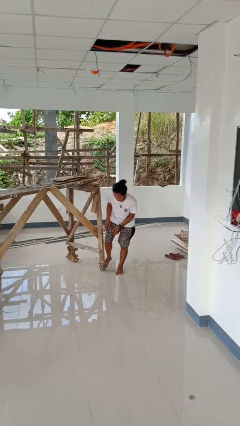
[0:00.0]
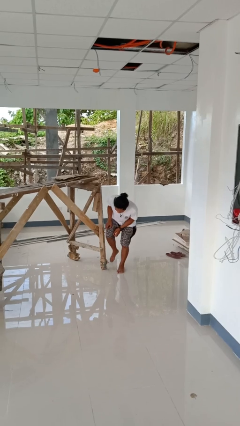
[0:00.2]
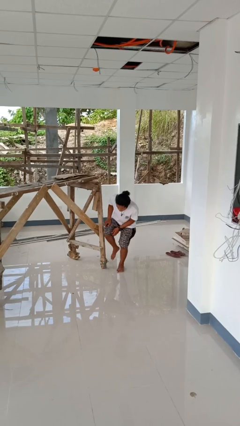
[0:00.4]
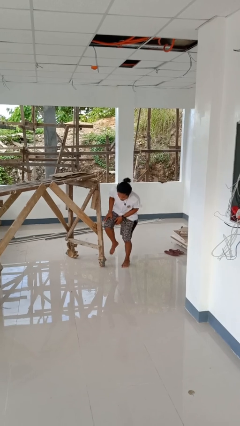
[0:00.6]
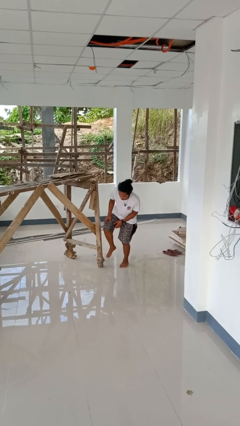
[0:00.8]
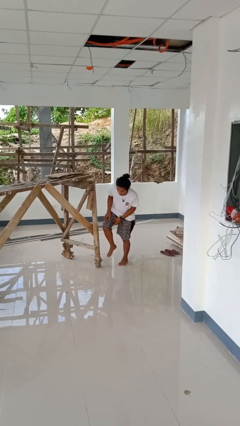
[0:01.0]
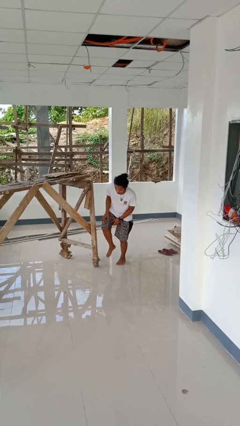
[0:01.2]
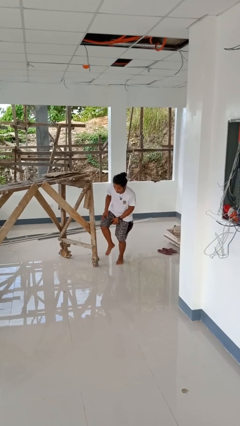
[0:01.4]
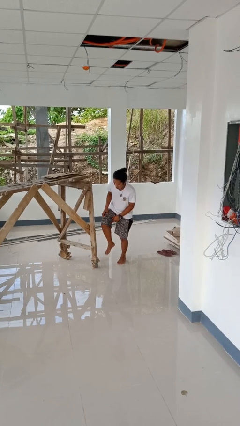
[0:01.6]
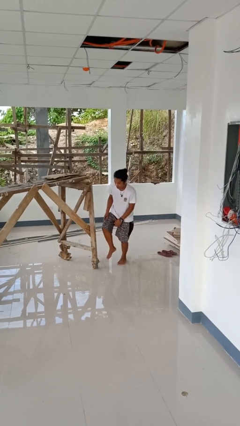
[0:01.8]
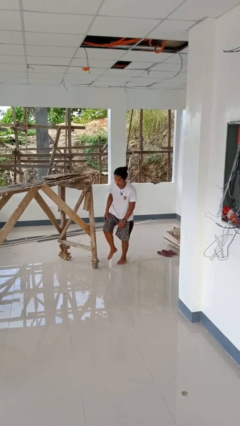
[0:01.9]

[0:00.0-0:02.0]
person stubs toe

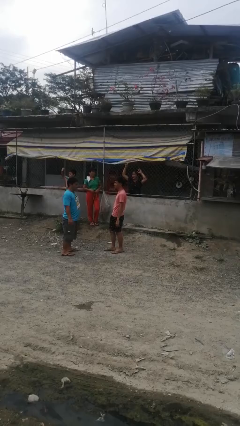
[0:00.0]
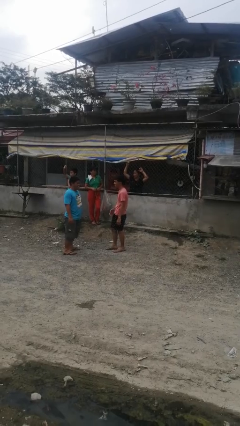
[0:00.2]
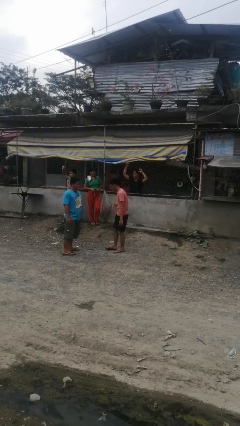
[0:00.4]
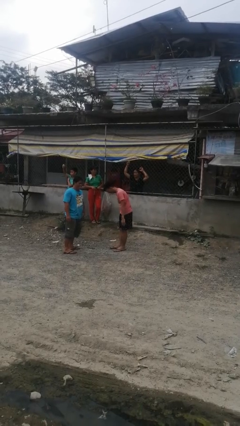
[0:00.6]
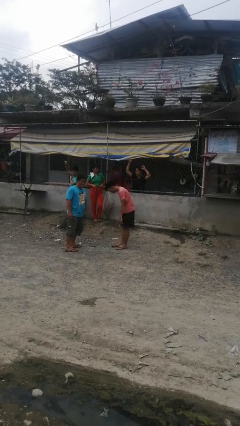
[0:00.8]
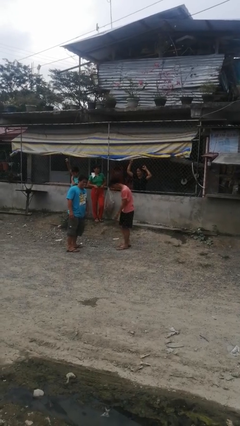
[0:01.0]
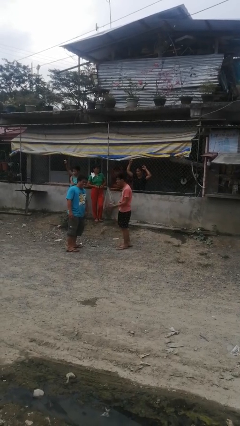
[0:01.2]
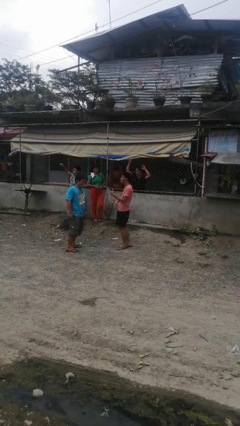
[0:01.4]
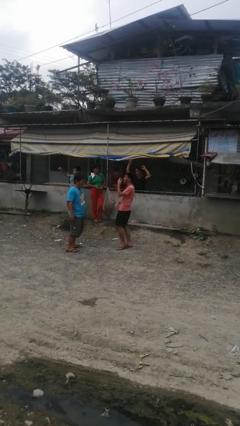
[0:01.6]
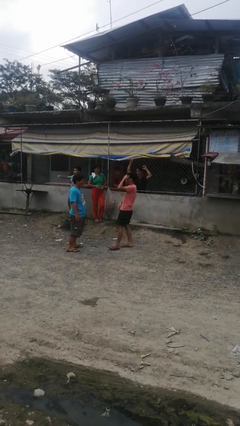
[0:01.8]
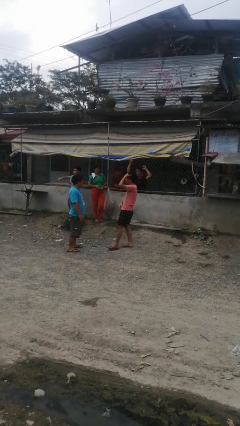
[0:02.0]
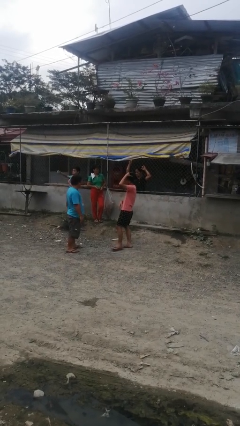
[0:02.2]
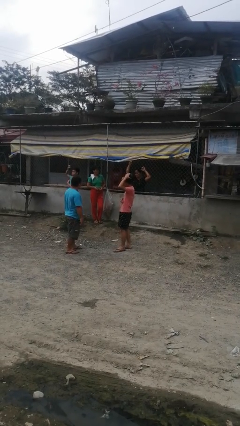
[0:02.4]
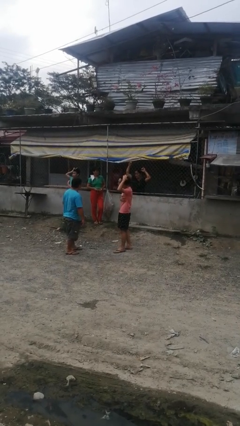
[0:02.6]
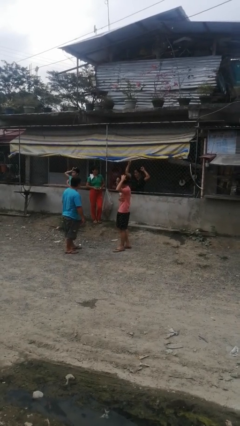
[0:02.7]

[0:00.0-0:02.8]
person laughs with person

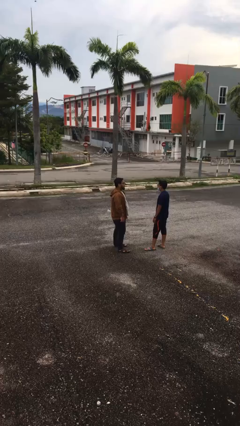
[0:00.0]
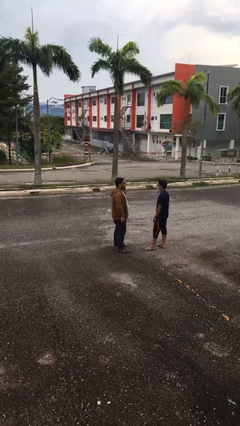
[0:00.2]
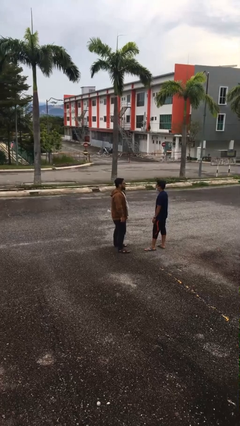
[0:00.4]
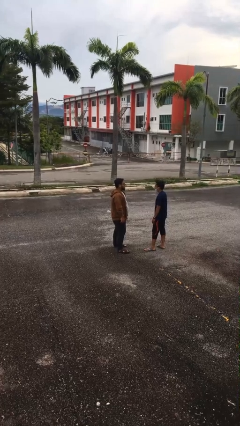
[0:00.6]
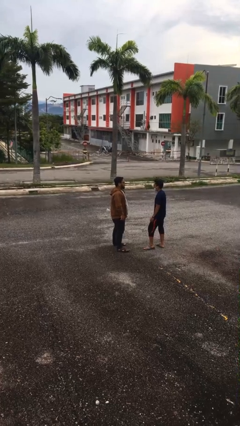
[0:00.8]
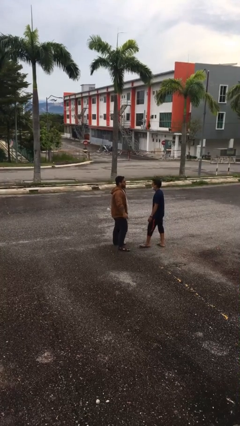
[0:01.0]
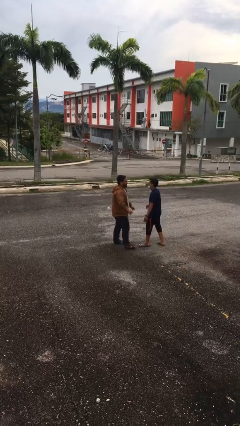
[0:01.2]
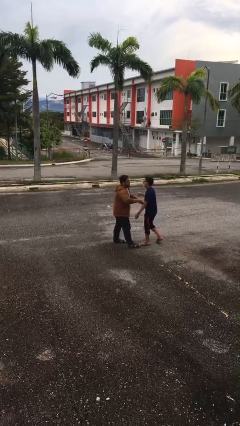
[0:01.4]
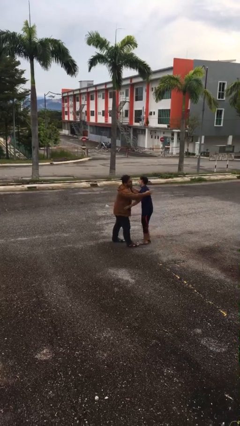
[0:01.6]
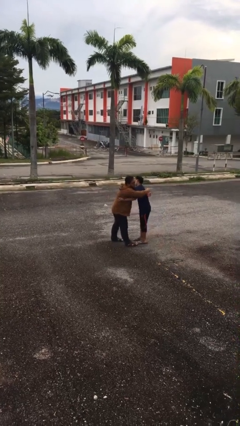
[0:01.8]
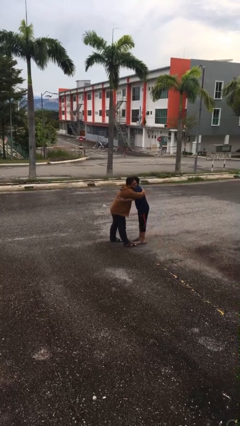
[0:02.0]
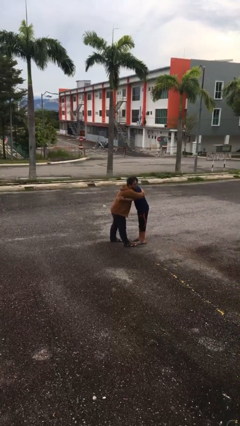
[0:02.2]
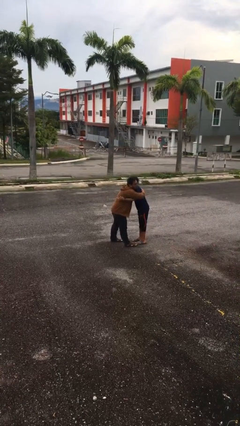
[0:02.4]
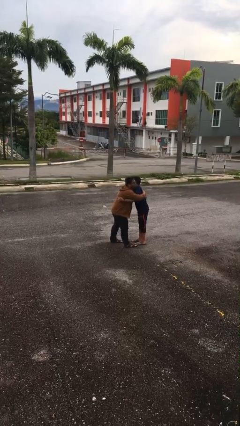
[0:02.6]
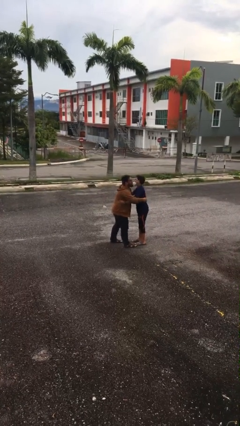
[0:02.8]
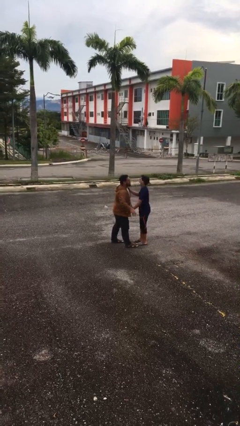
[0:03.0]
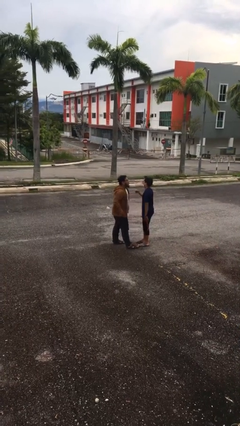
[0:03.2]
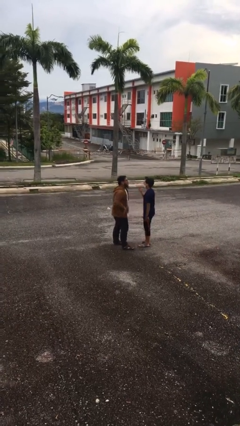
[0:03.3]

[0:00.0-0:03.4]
person embraces person

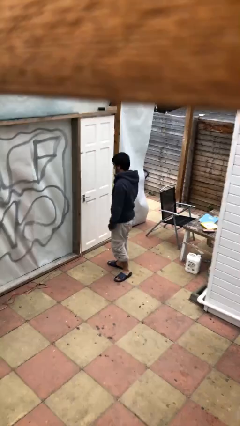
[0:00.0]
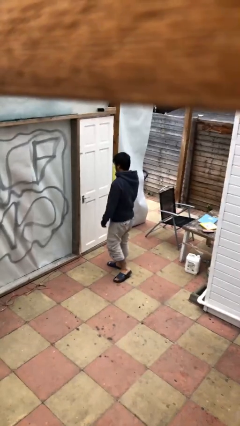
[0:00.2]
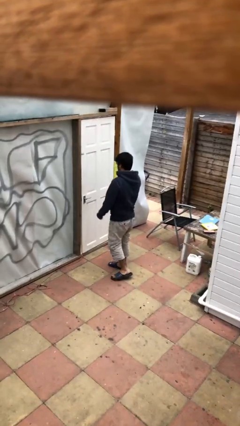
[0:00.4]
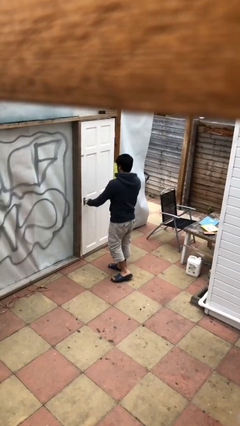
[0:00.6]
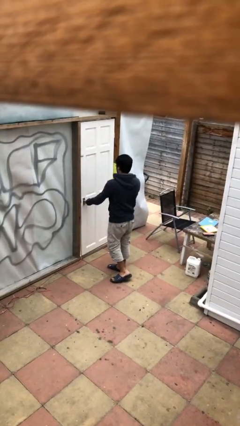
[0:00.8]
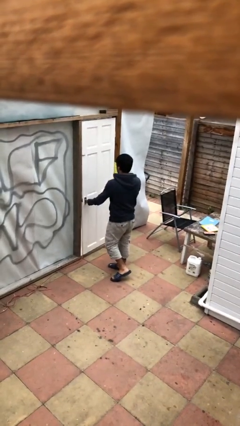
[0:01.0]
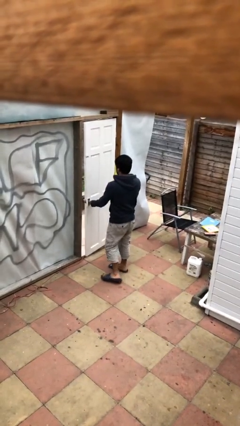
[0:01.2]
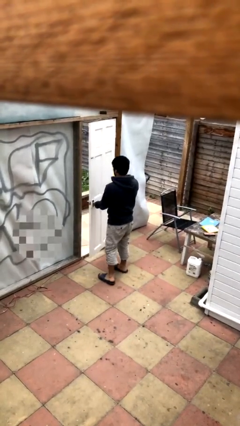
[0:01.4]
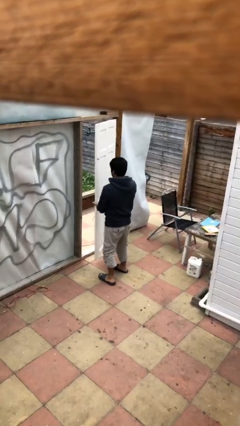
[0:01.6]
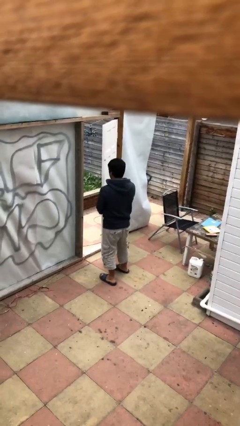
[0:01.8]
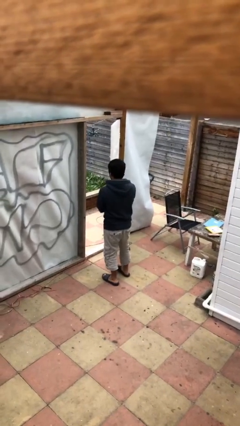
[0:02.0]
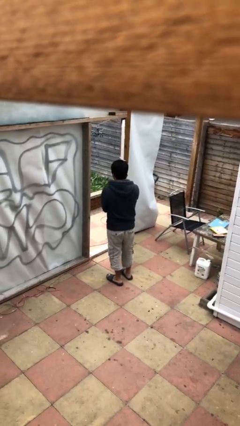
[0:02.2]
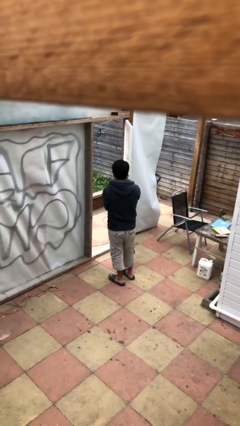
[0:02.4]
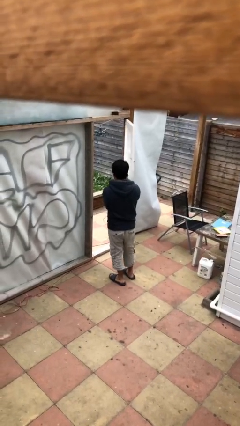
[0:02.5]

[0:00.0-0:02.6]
person opens facility door

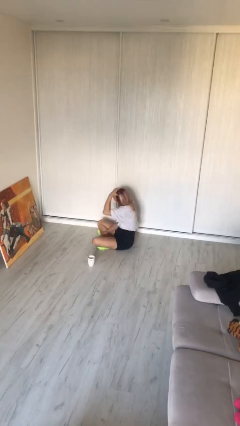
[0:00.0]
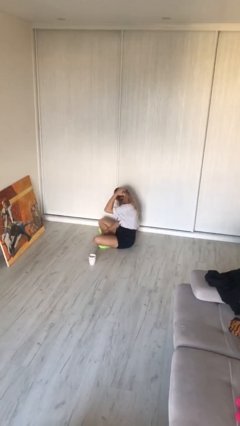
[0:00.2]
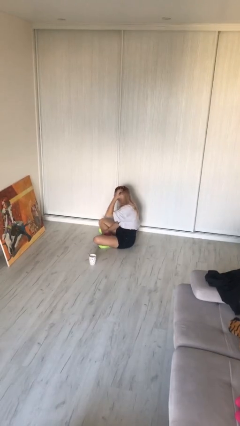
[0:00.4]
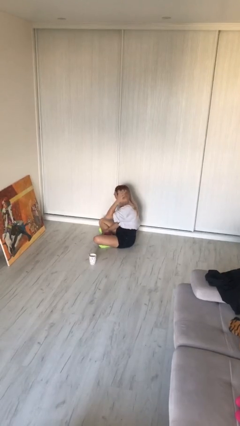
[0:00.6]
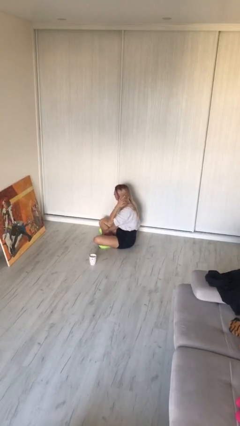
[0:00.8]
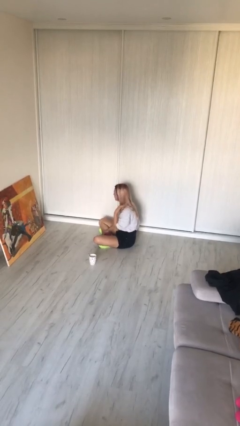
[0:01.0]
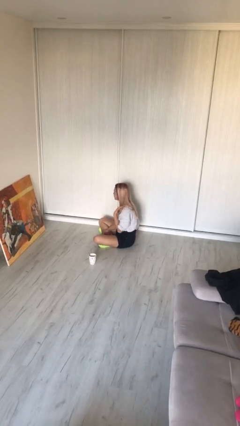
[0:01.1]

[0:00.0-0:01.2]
person strokes hair

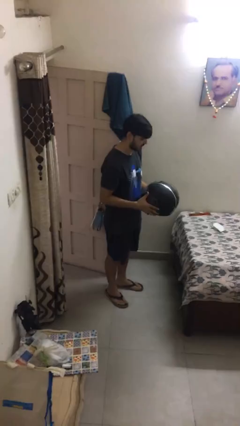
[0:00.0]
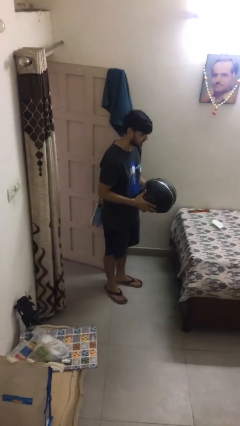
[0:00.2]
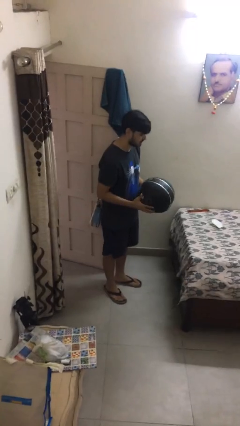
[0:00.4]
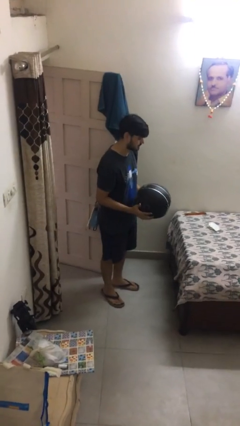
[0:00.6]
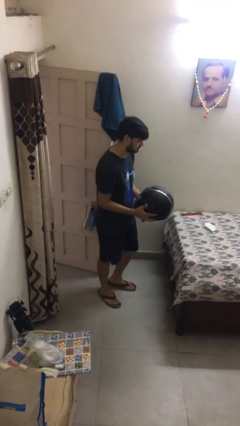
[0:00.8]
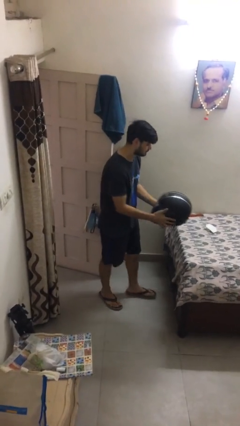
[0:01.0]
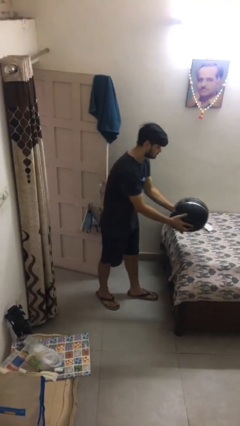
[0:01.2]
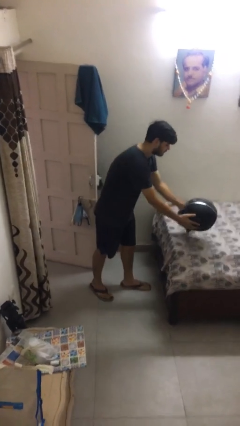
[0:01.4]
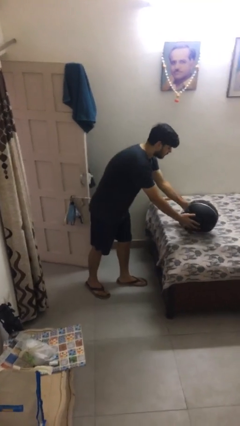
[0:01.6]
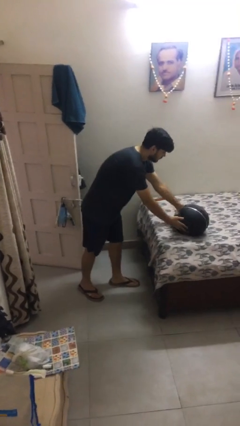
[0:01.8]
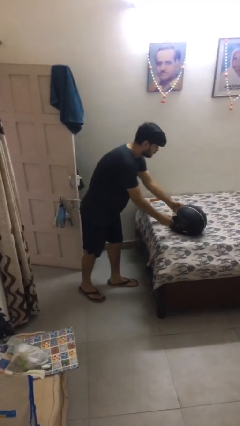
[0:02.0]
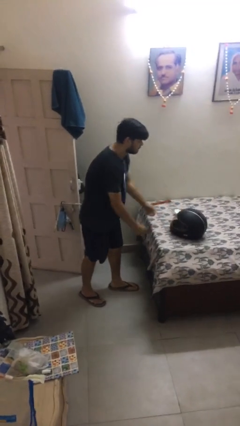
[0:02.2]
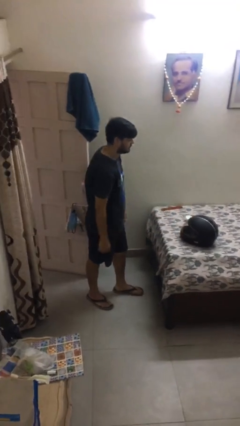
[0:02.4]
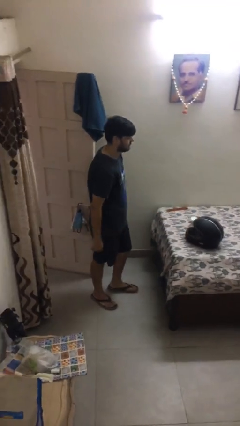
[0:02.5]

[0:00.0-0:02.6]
person puts down object on bed

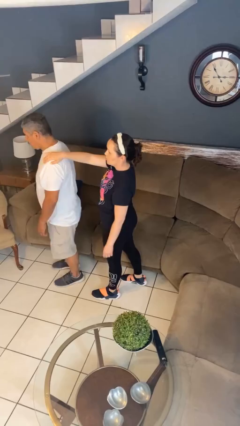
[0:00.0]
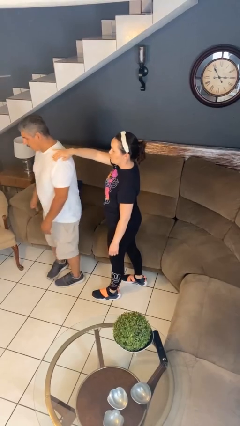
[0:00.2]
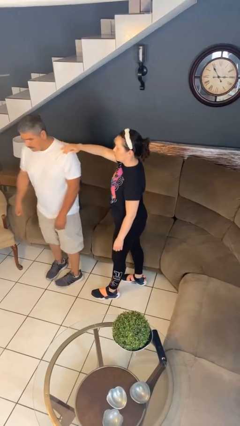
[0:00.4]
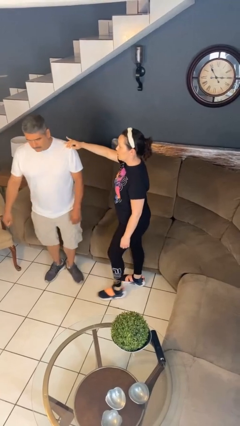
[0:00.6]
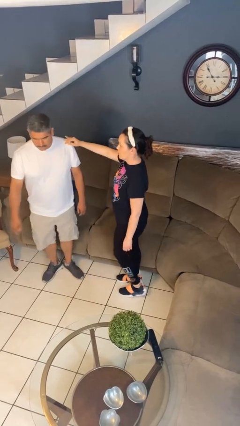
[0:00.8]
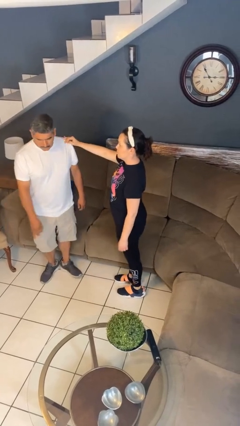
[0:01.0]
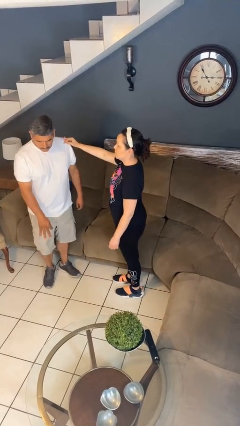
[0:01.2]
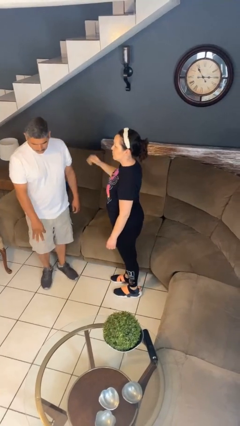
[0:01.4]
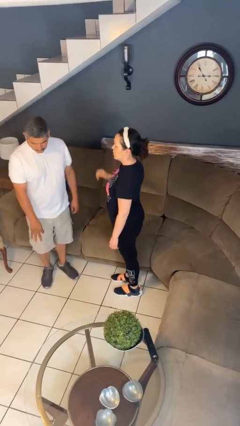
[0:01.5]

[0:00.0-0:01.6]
person spins person around

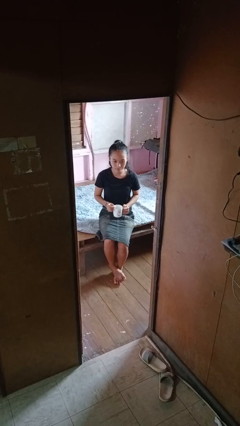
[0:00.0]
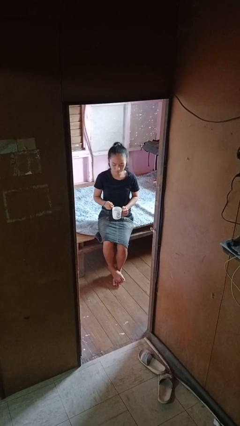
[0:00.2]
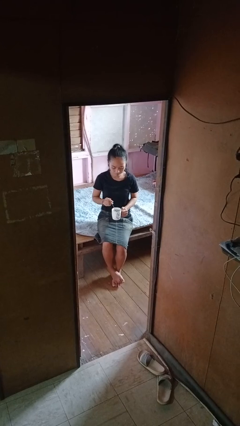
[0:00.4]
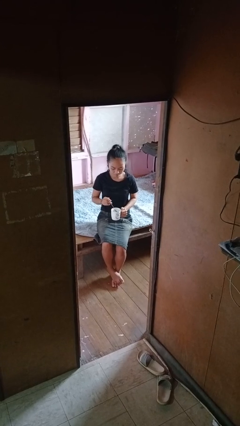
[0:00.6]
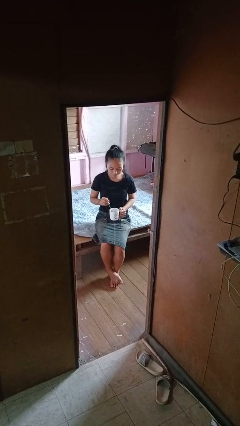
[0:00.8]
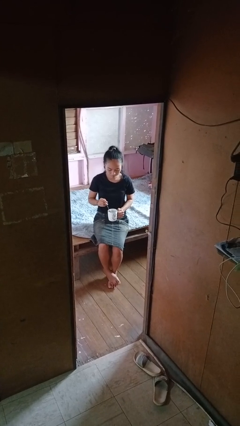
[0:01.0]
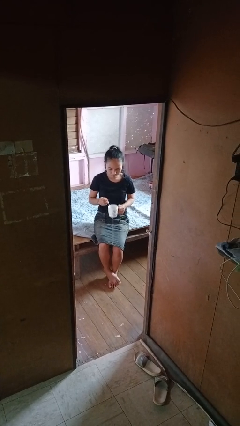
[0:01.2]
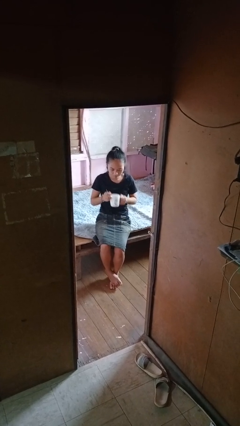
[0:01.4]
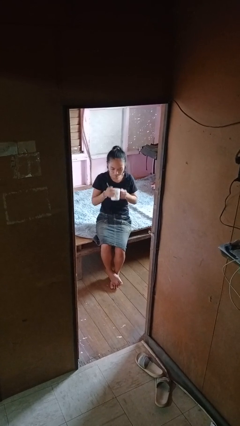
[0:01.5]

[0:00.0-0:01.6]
person stirs mug
